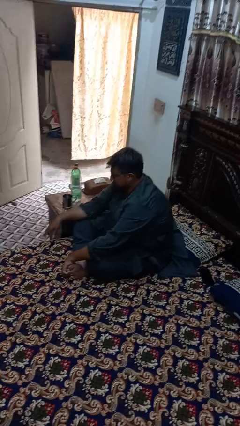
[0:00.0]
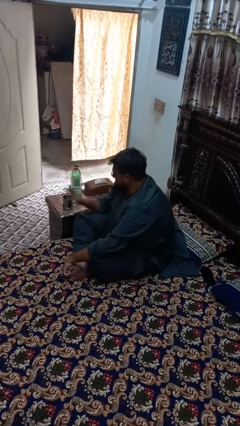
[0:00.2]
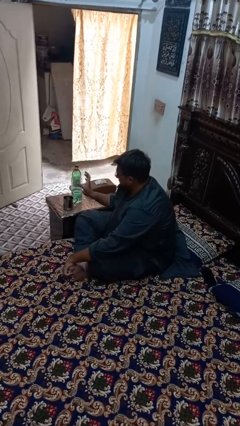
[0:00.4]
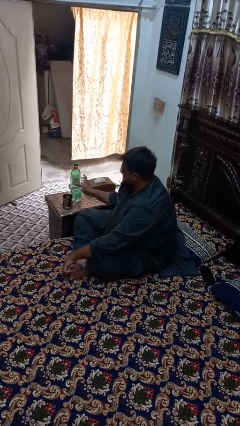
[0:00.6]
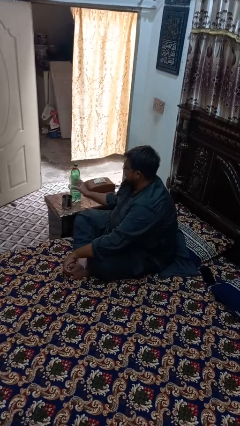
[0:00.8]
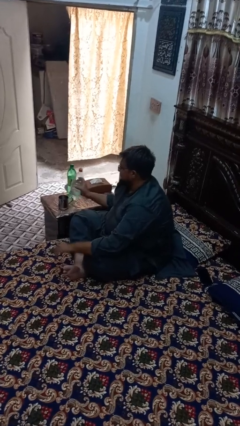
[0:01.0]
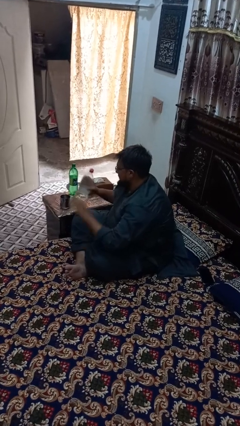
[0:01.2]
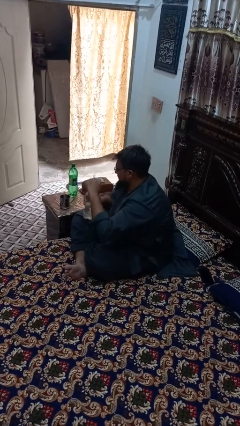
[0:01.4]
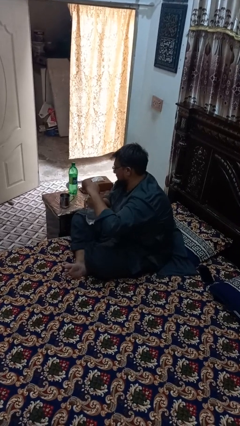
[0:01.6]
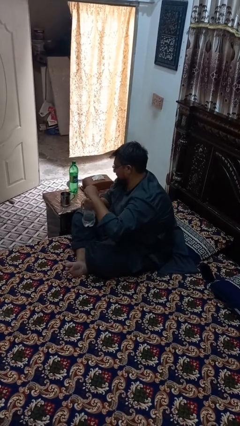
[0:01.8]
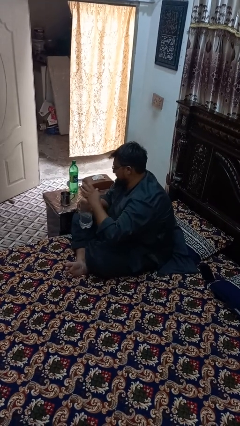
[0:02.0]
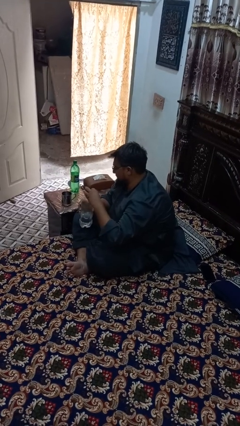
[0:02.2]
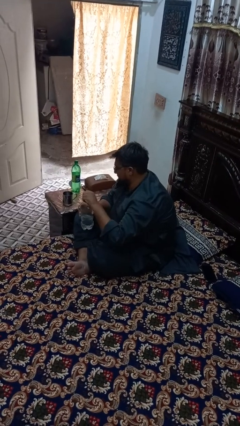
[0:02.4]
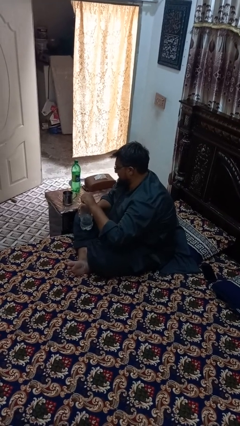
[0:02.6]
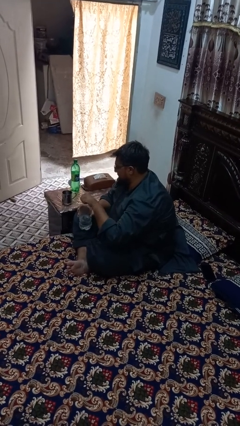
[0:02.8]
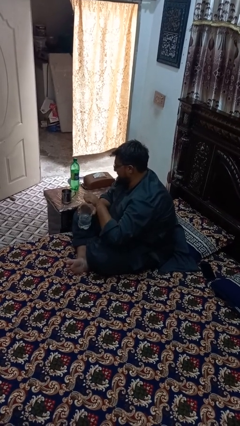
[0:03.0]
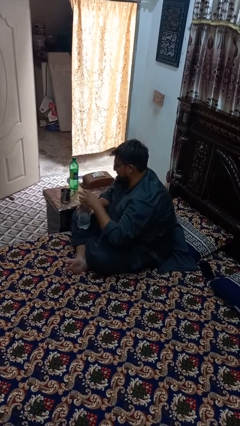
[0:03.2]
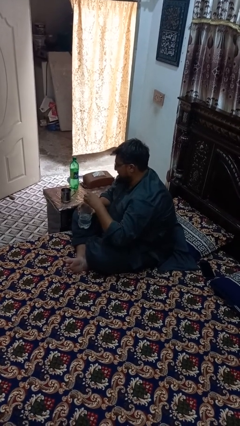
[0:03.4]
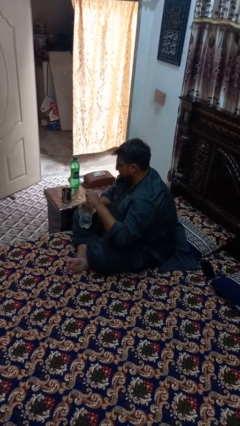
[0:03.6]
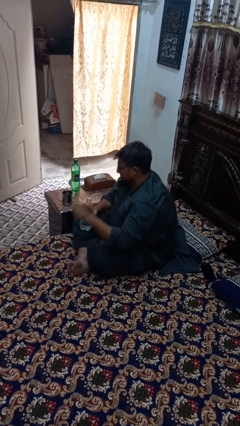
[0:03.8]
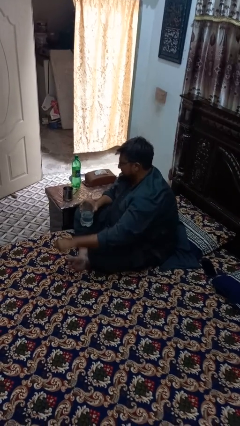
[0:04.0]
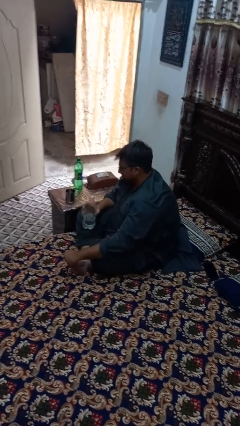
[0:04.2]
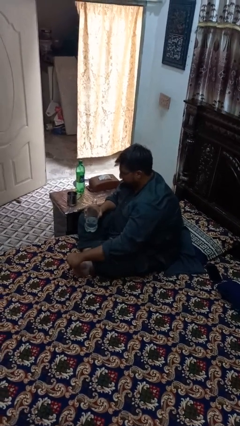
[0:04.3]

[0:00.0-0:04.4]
person unscrews lid from bottle

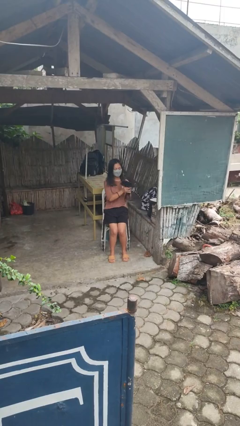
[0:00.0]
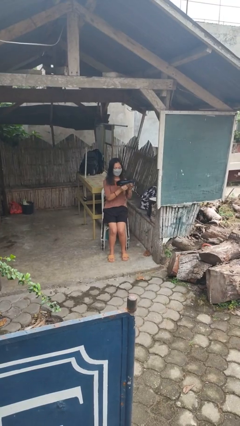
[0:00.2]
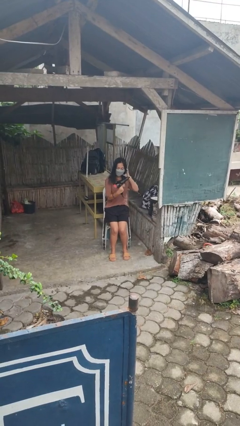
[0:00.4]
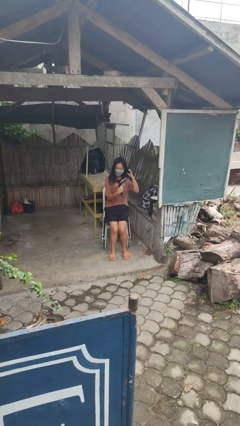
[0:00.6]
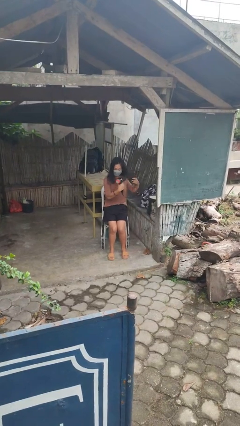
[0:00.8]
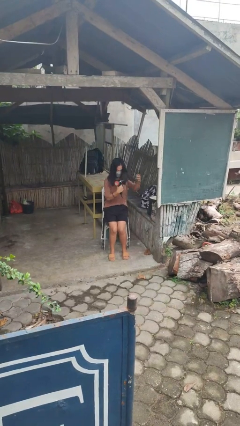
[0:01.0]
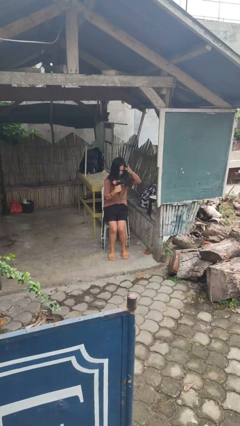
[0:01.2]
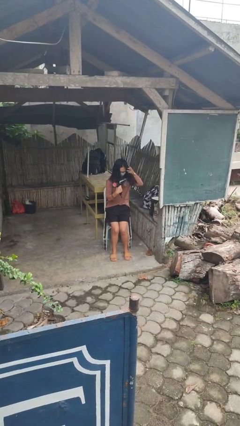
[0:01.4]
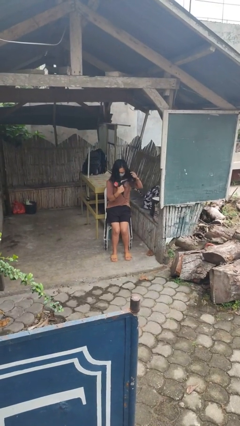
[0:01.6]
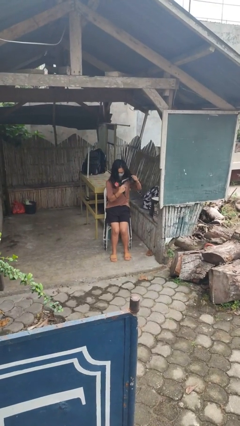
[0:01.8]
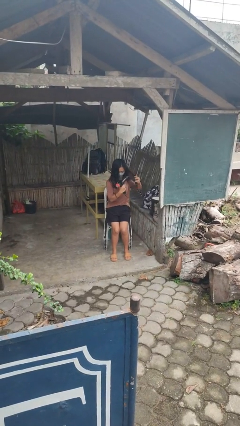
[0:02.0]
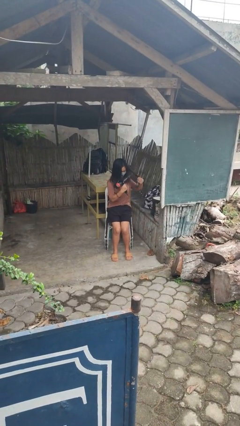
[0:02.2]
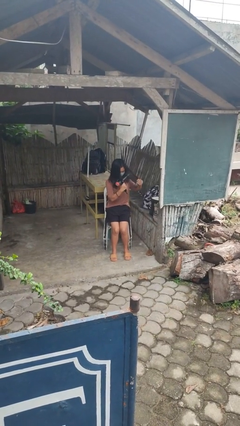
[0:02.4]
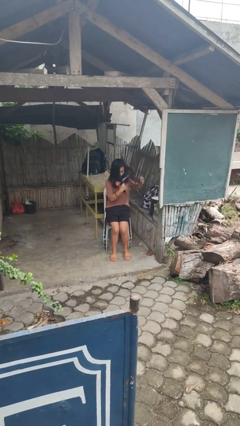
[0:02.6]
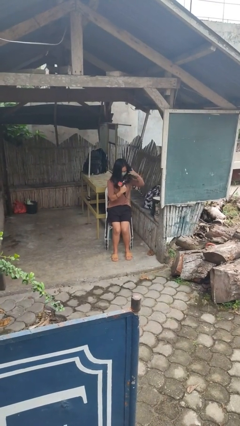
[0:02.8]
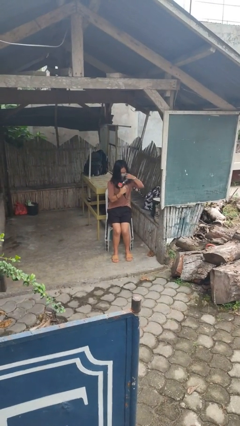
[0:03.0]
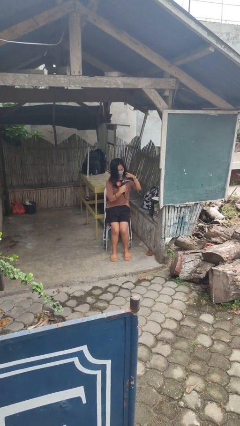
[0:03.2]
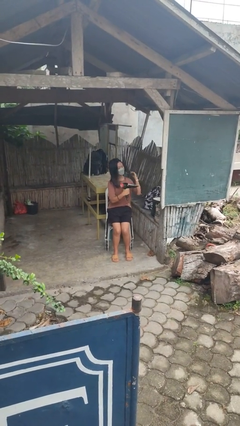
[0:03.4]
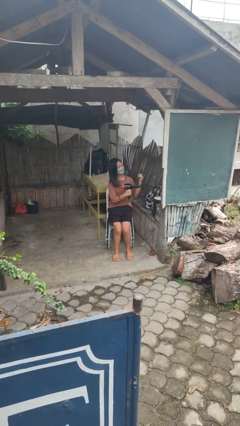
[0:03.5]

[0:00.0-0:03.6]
person dries hair with hairdryer

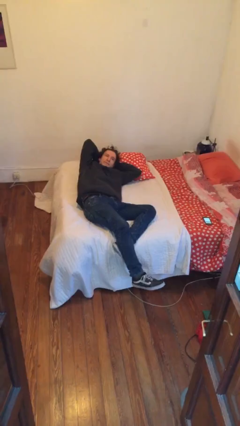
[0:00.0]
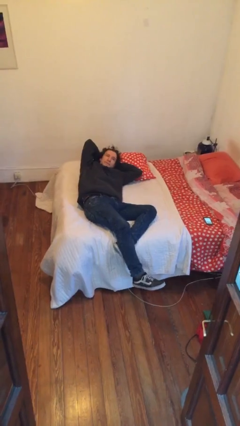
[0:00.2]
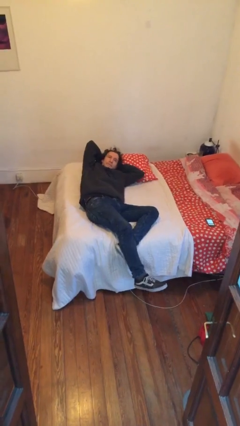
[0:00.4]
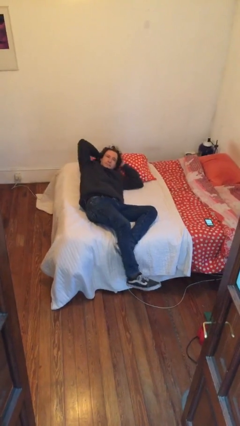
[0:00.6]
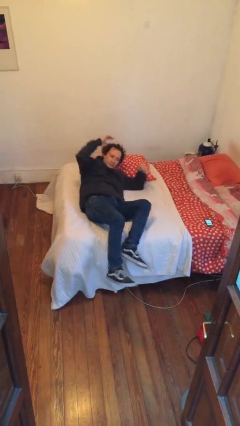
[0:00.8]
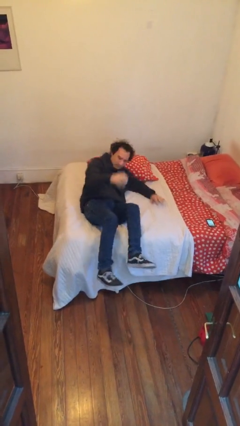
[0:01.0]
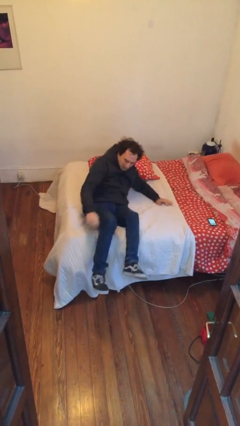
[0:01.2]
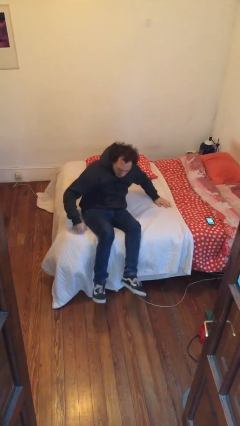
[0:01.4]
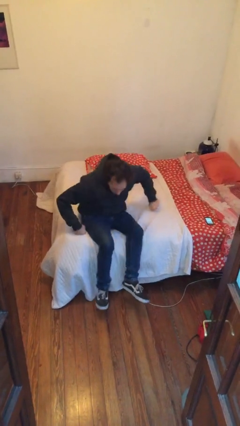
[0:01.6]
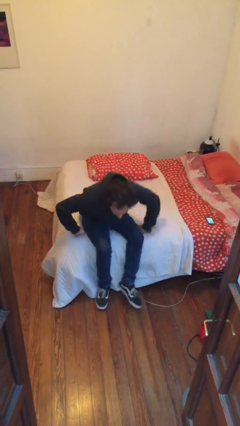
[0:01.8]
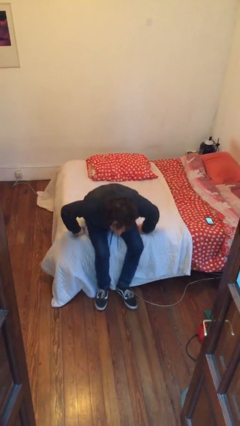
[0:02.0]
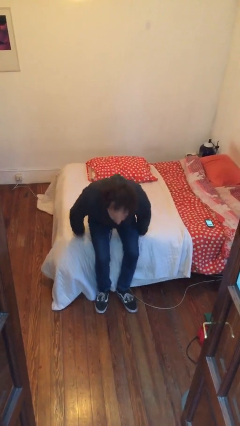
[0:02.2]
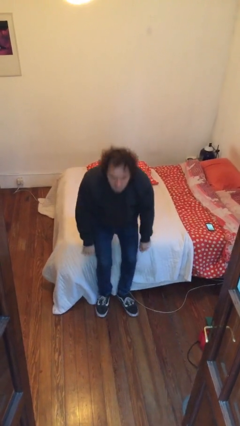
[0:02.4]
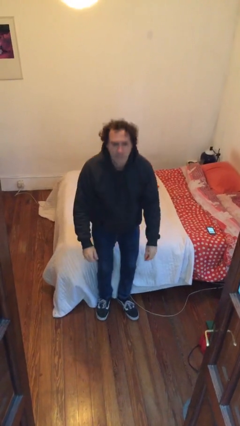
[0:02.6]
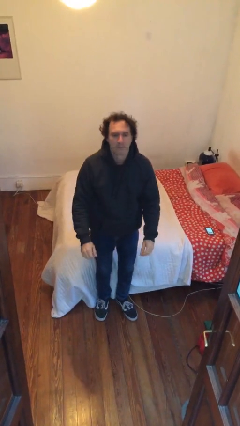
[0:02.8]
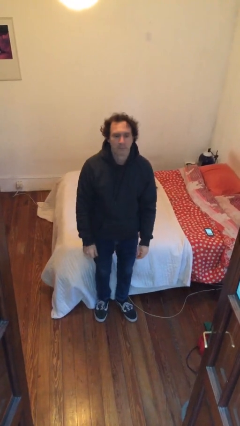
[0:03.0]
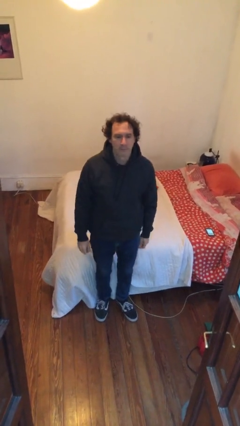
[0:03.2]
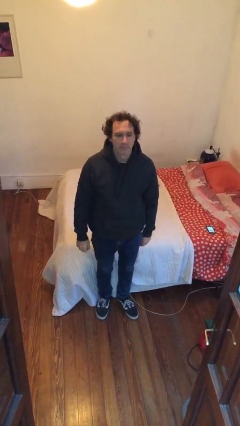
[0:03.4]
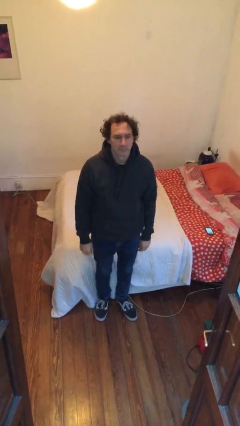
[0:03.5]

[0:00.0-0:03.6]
person stands up

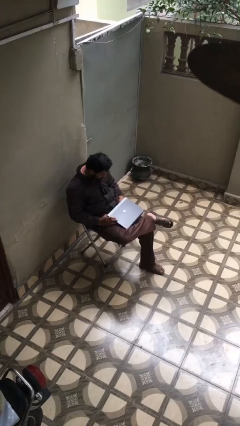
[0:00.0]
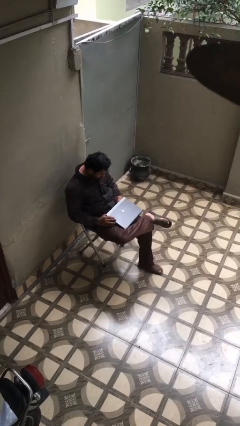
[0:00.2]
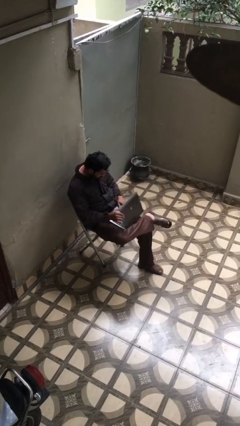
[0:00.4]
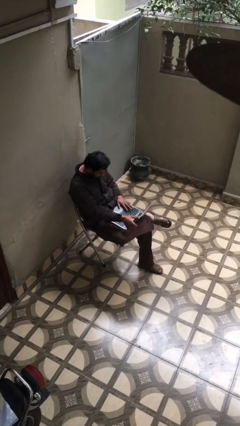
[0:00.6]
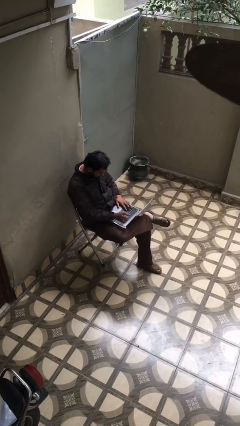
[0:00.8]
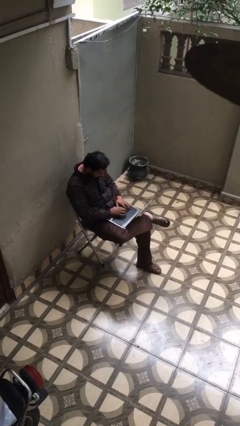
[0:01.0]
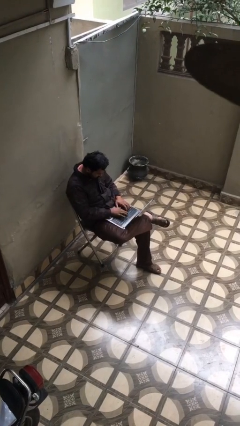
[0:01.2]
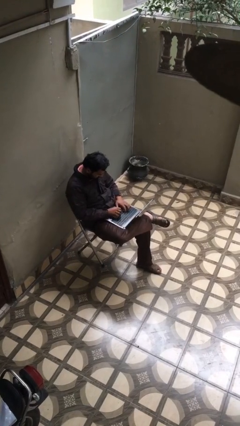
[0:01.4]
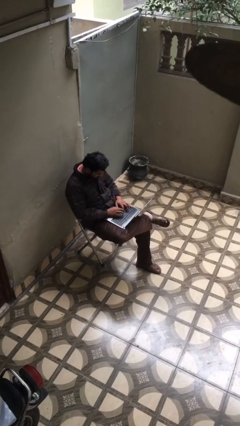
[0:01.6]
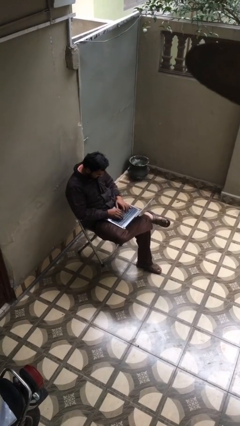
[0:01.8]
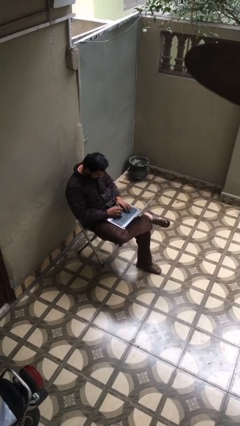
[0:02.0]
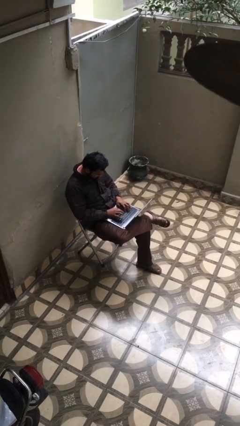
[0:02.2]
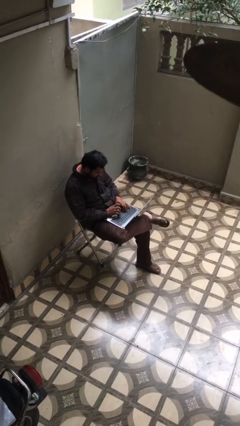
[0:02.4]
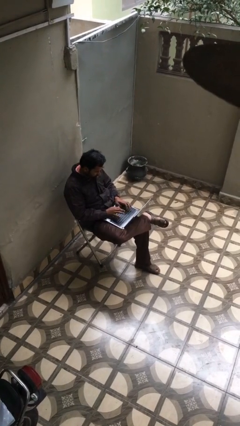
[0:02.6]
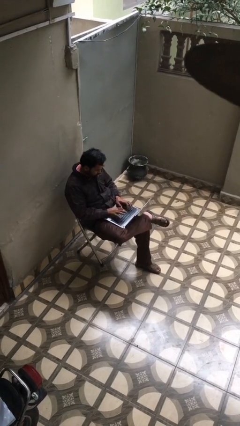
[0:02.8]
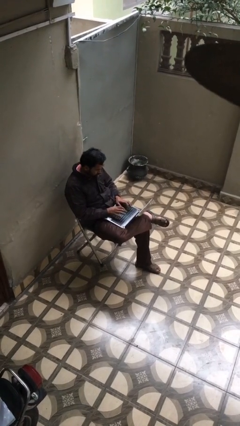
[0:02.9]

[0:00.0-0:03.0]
person interacts with laptop

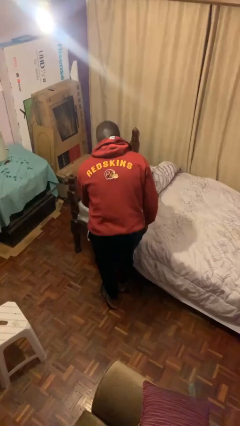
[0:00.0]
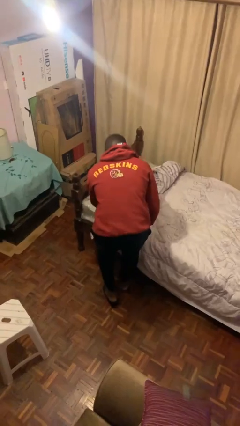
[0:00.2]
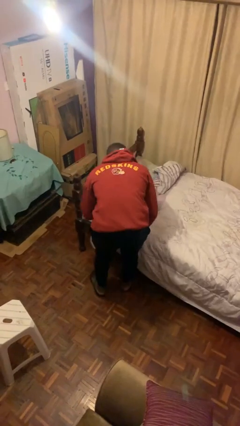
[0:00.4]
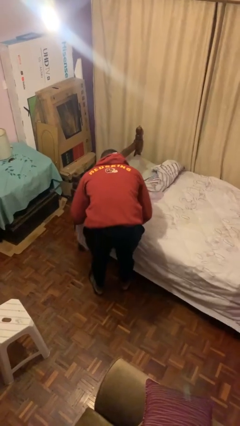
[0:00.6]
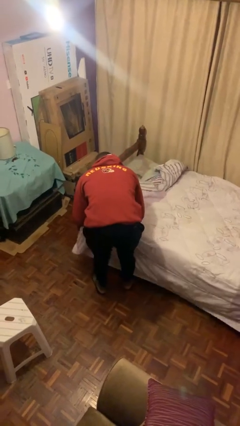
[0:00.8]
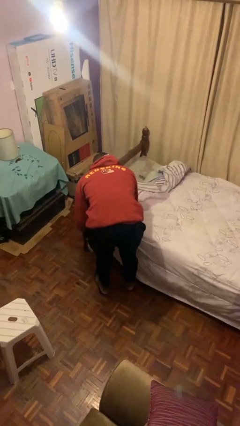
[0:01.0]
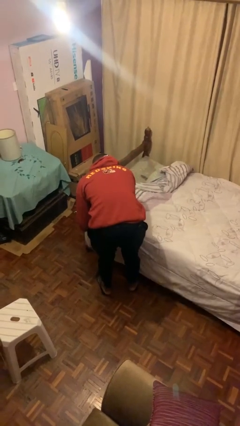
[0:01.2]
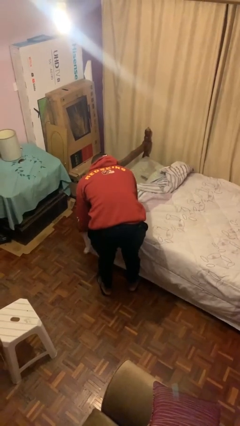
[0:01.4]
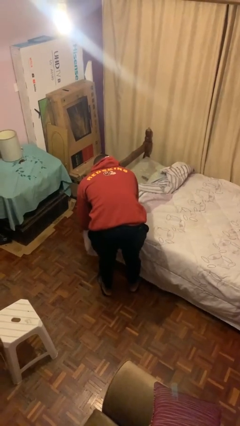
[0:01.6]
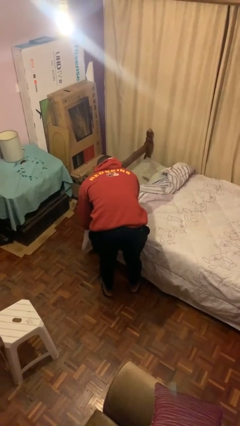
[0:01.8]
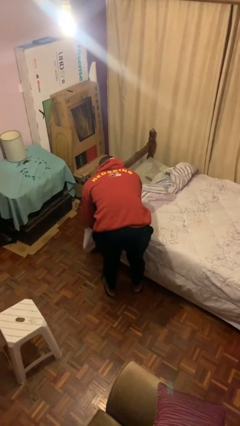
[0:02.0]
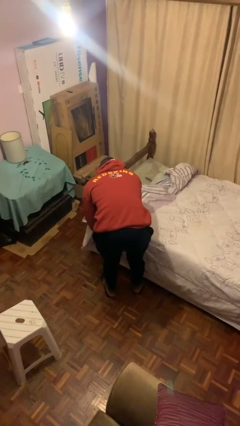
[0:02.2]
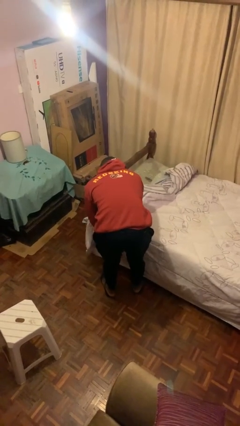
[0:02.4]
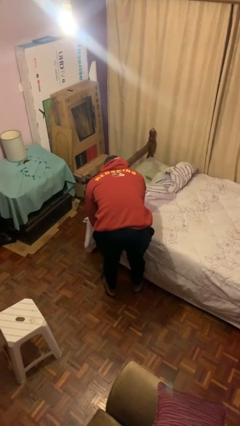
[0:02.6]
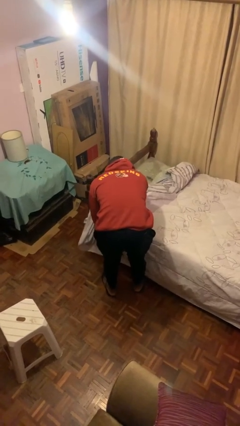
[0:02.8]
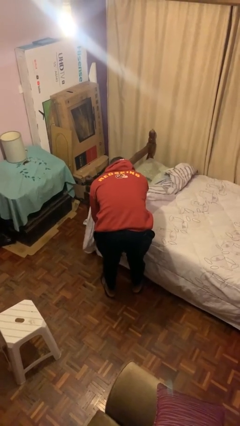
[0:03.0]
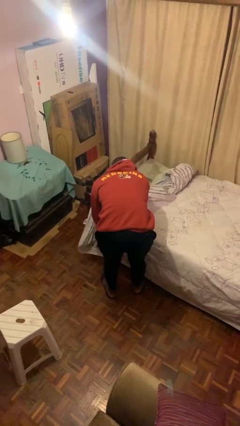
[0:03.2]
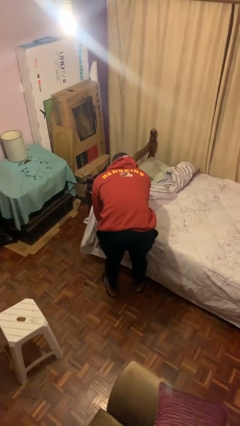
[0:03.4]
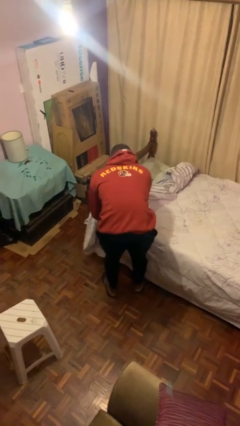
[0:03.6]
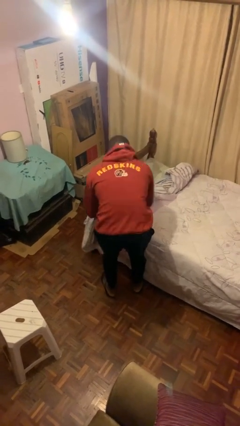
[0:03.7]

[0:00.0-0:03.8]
person makes bed
